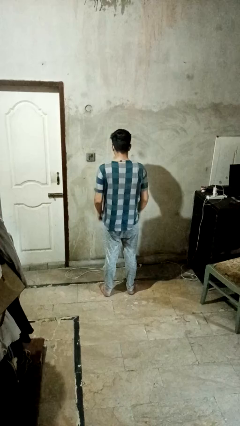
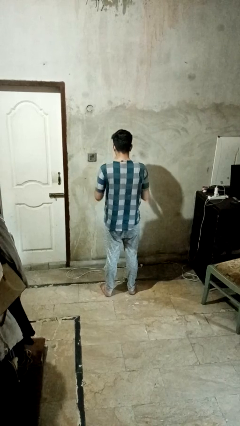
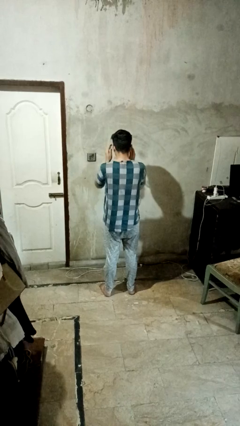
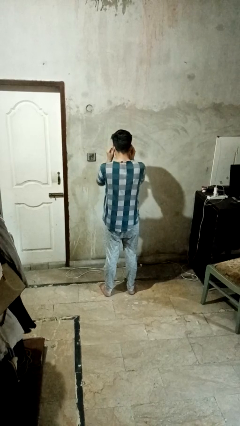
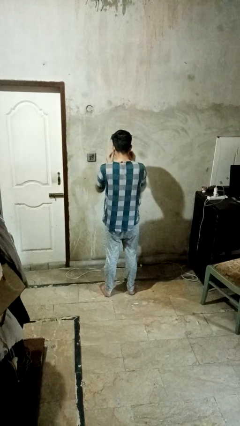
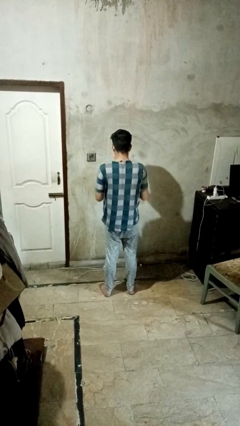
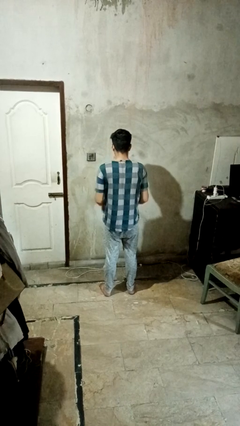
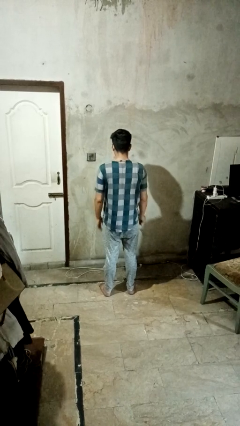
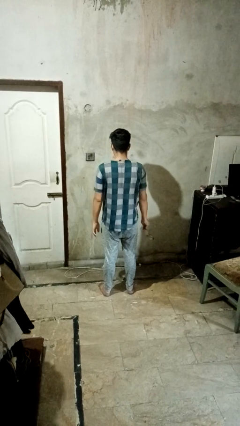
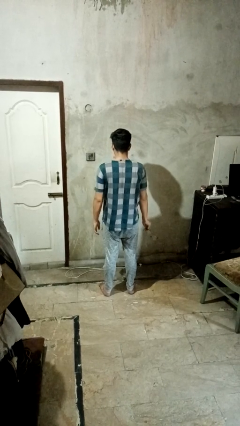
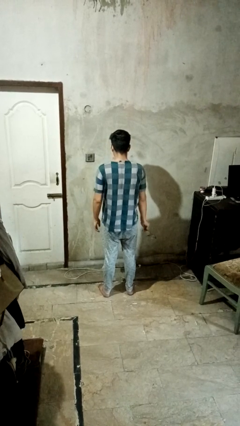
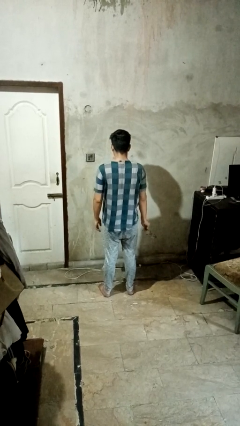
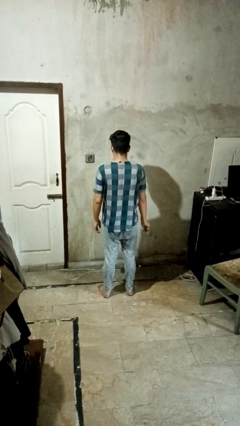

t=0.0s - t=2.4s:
person takes off glasses

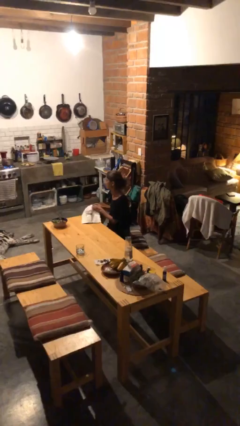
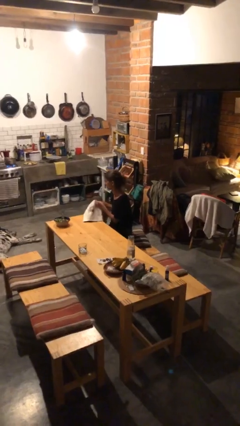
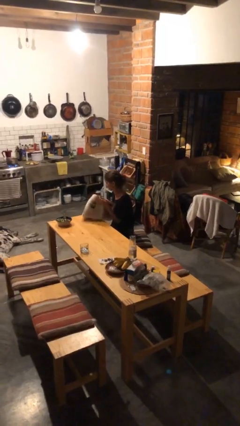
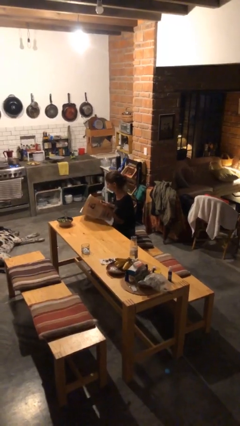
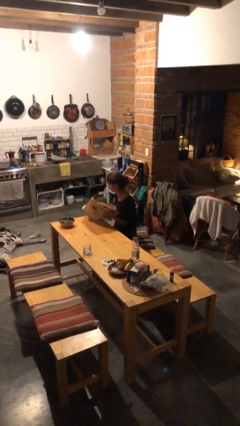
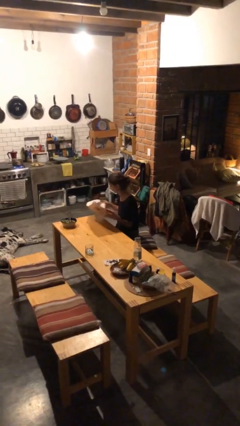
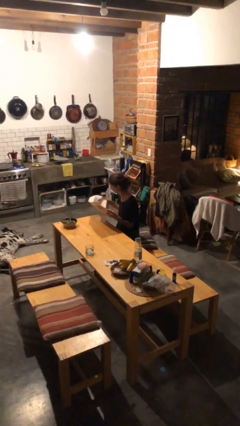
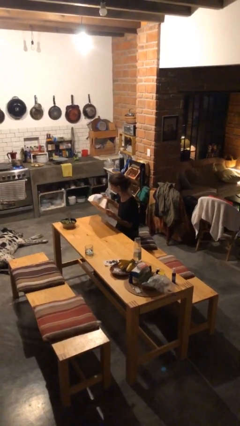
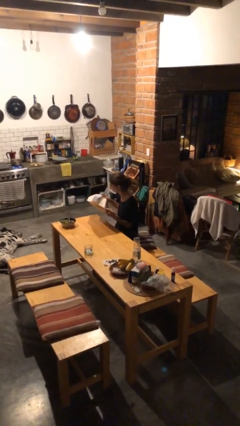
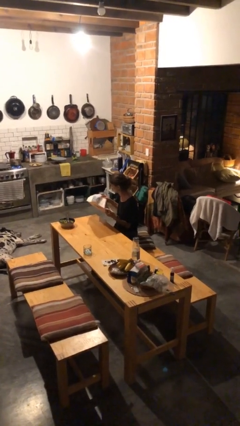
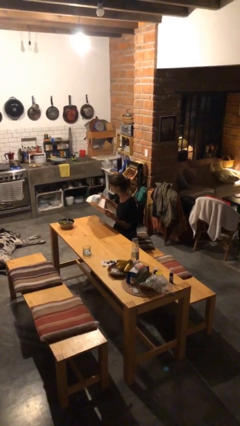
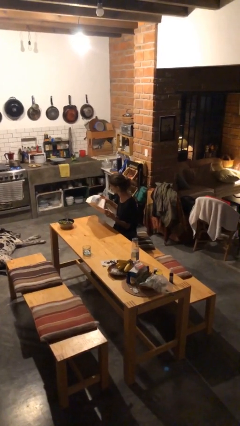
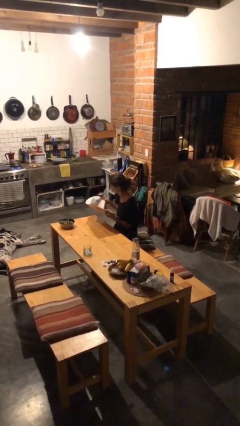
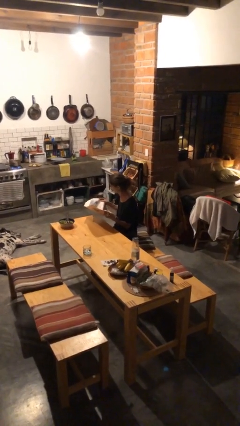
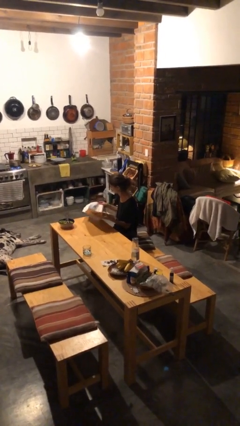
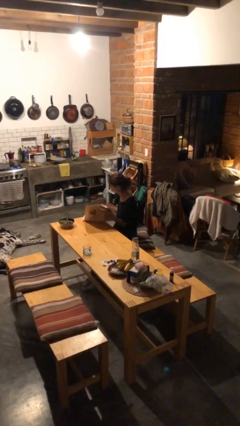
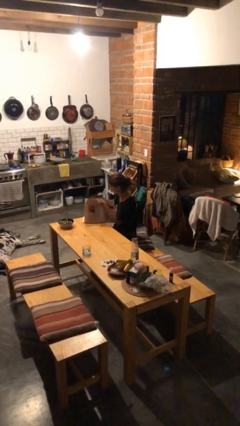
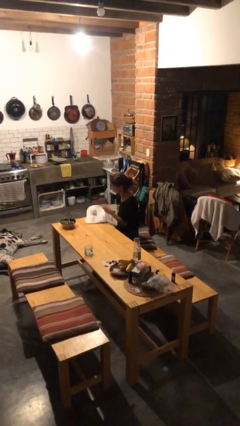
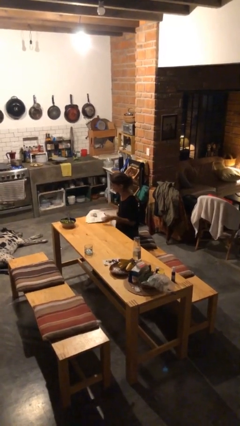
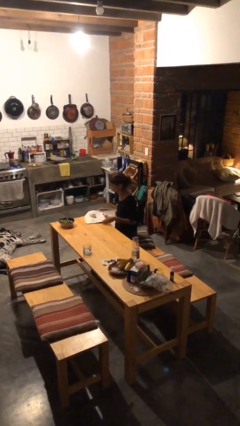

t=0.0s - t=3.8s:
person reads newspaper

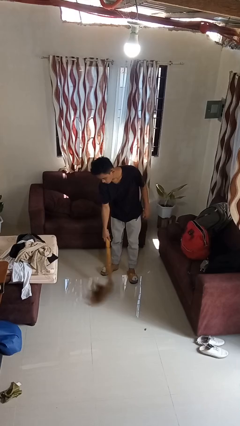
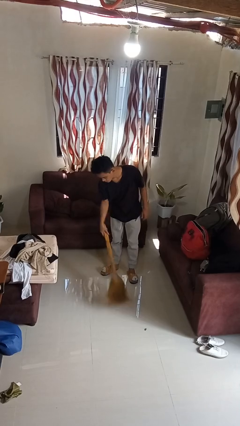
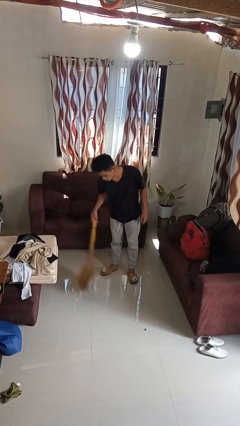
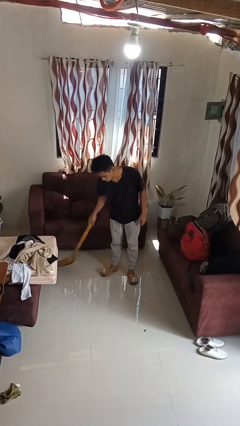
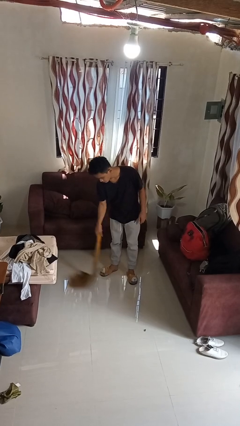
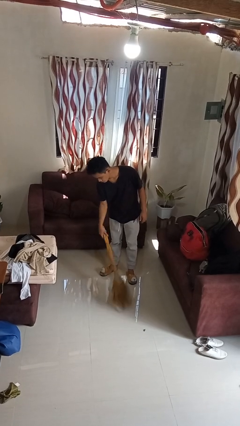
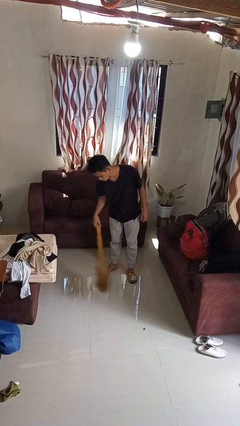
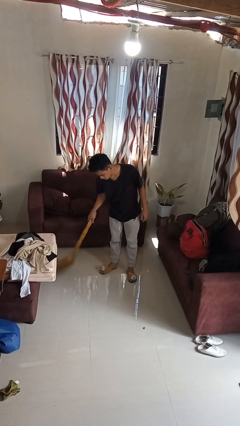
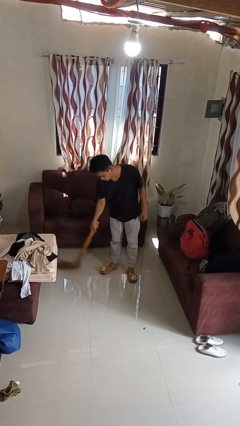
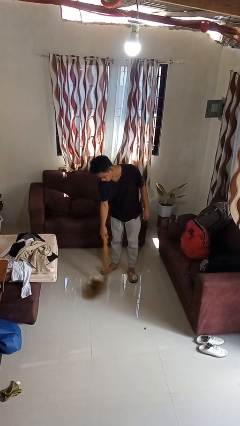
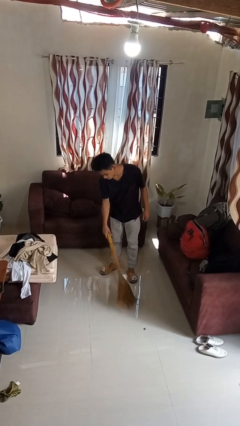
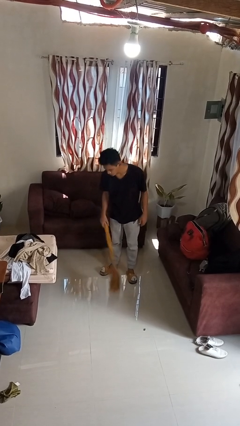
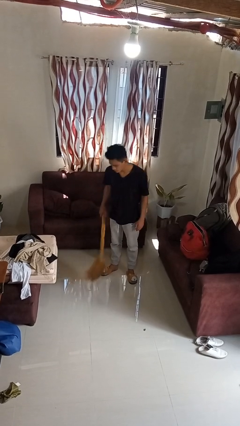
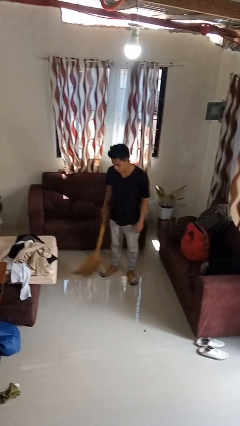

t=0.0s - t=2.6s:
person sweeps floor

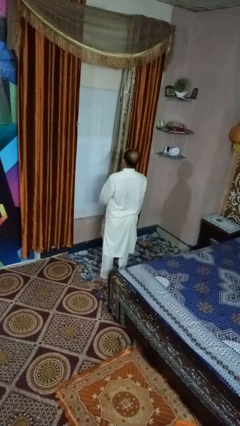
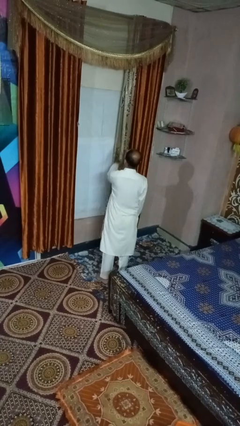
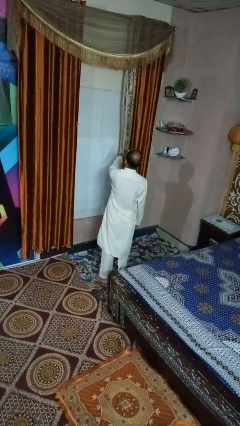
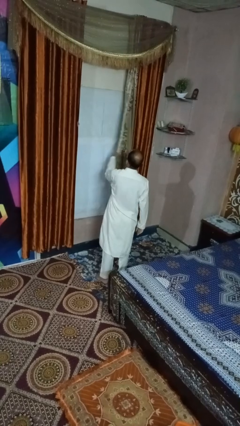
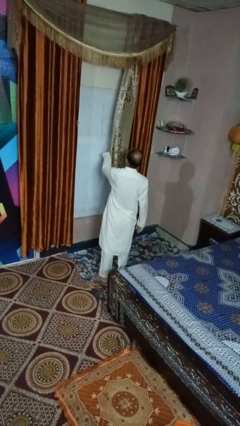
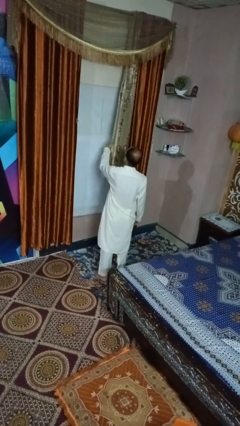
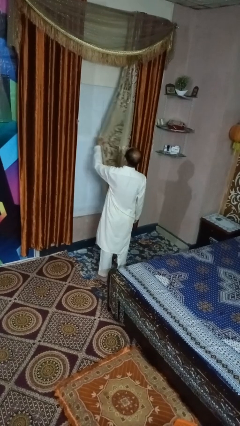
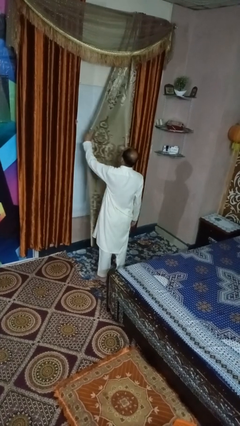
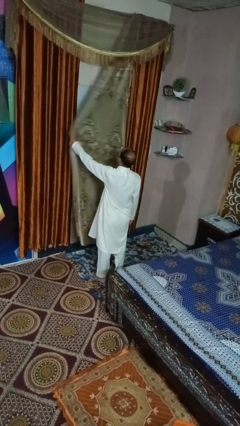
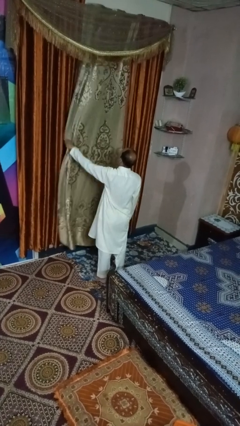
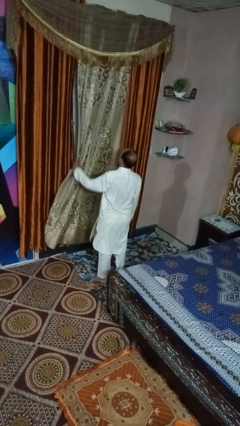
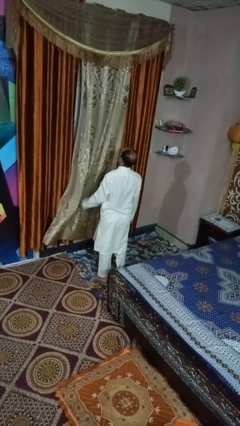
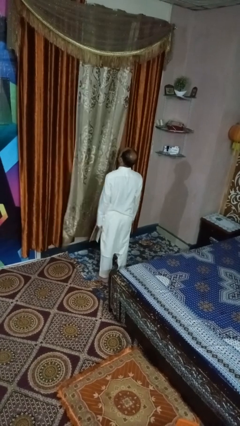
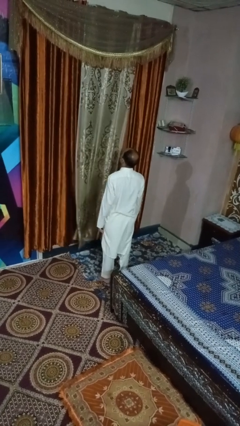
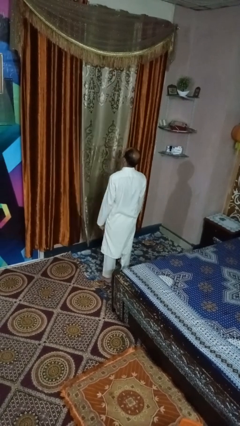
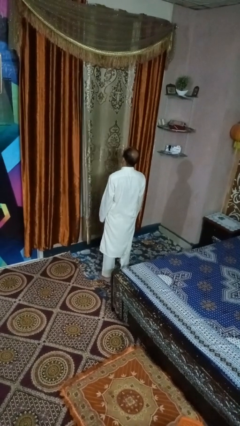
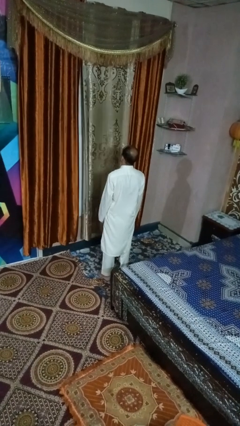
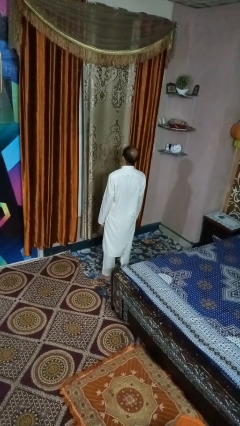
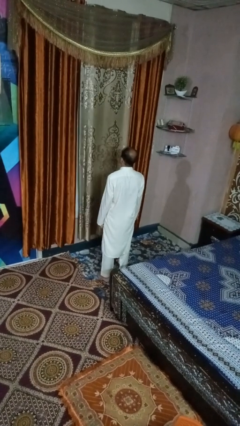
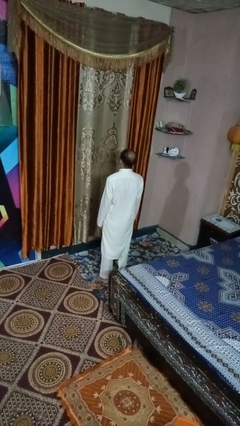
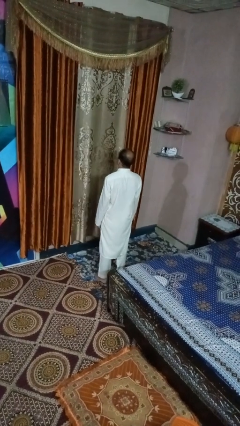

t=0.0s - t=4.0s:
person closes curtains

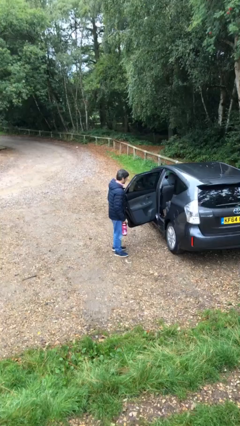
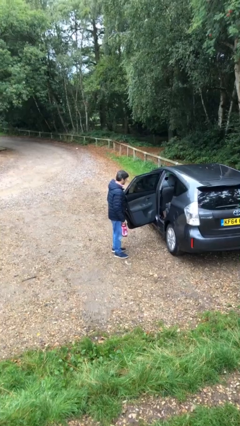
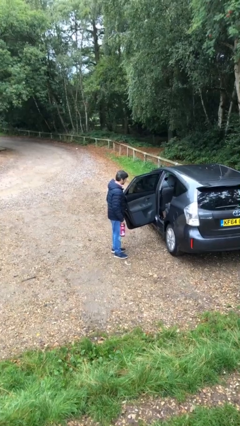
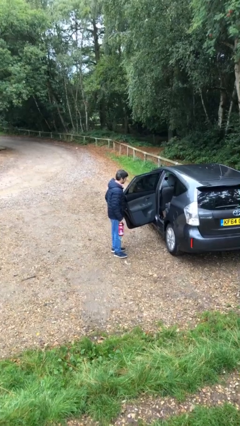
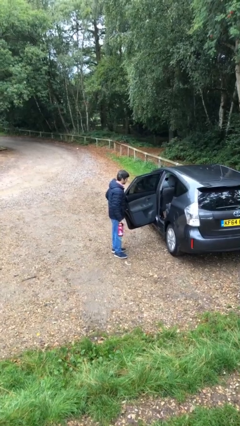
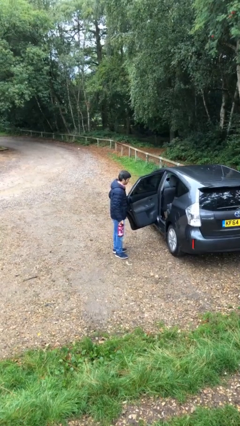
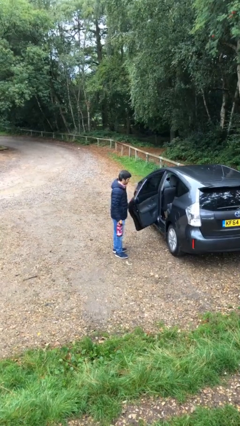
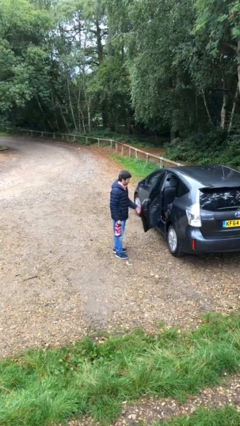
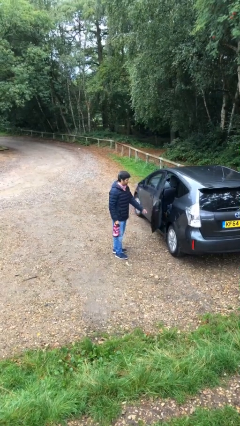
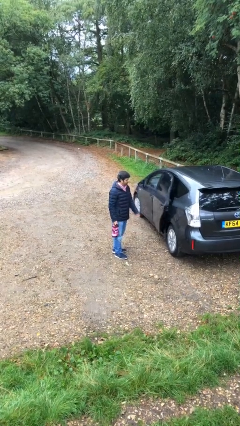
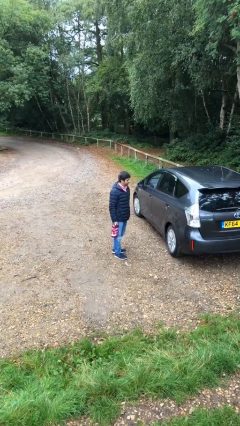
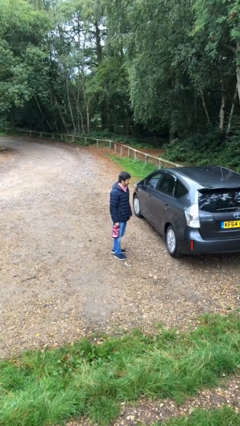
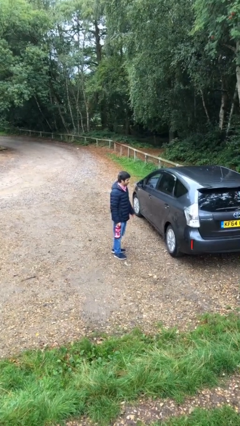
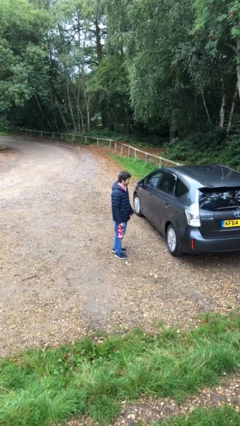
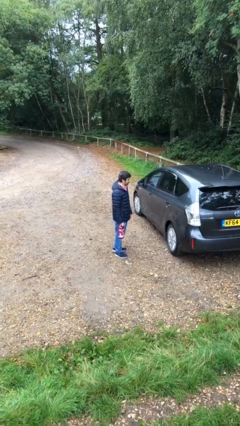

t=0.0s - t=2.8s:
person closes car door

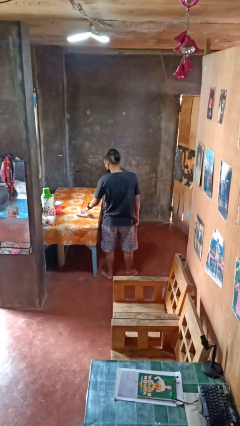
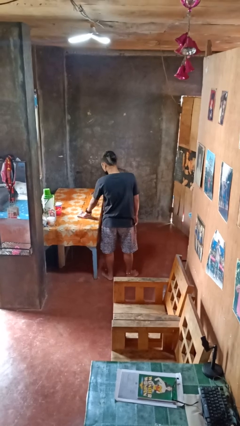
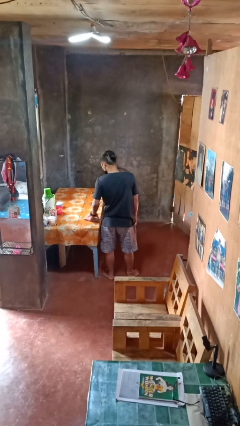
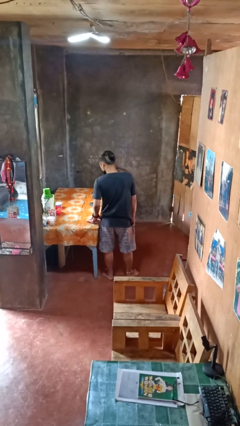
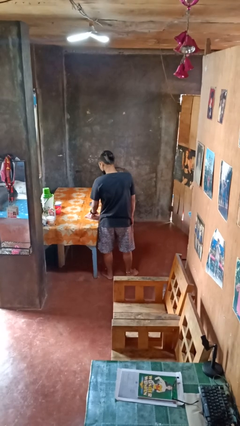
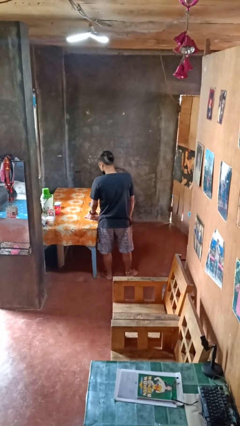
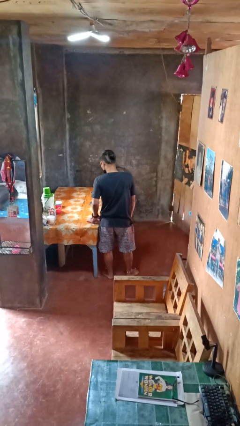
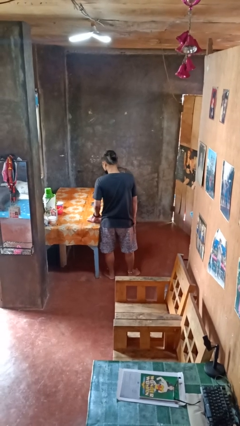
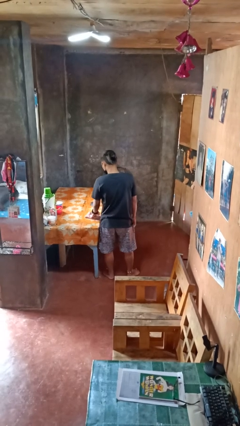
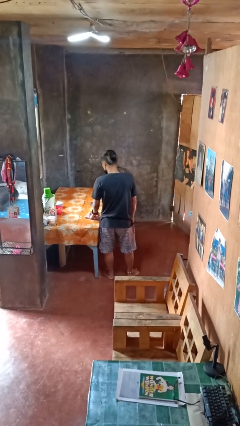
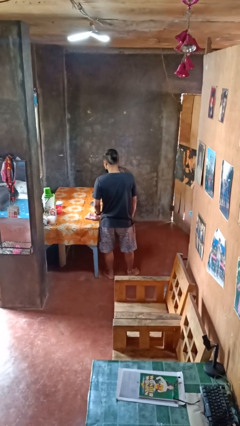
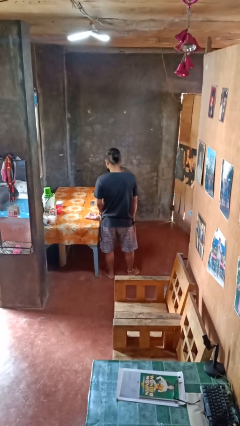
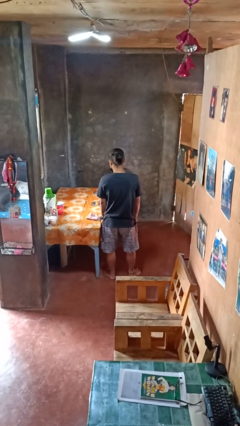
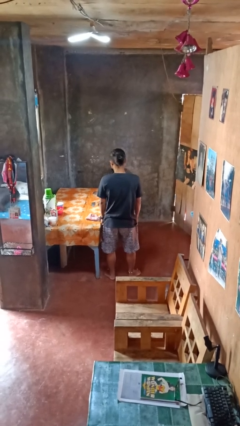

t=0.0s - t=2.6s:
person cleans table with rag
